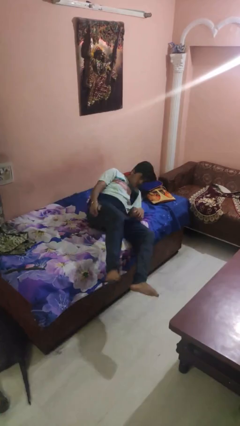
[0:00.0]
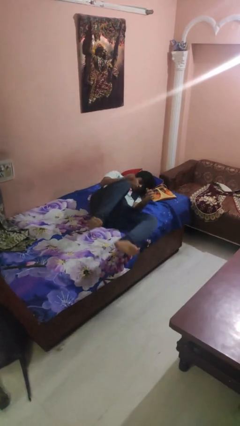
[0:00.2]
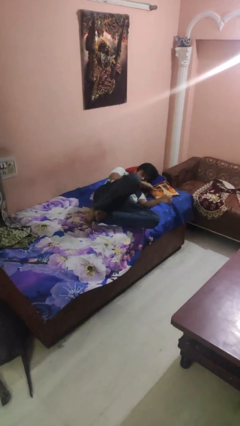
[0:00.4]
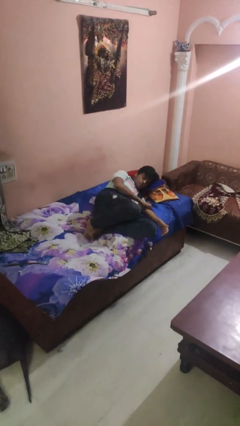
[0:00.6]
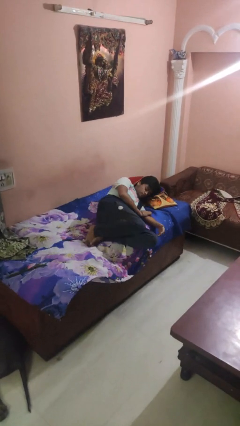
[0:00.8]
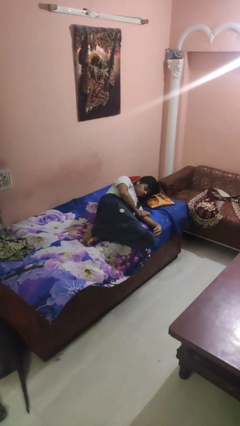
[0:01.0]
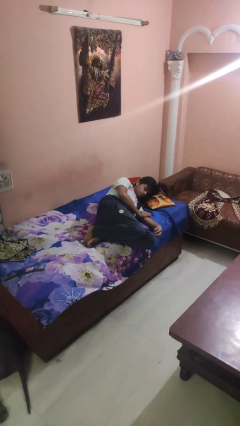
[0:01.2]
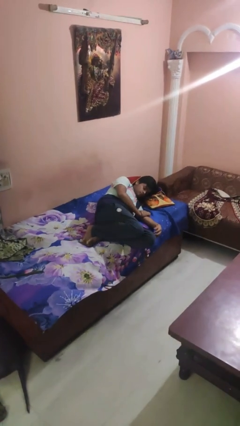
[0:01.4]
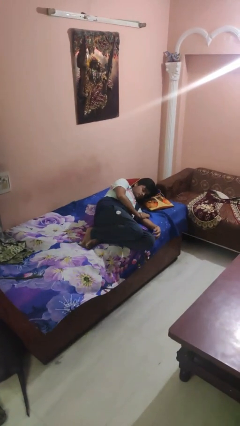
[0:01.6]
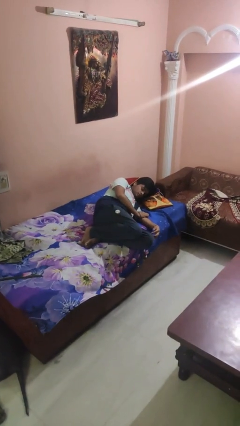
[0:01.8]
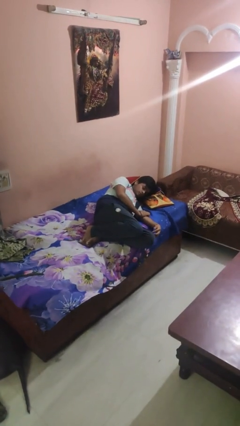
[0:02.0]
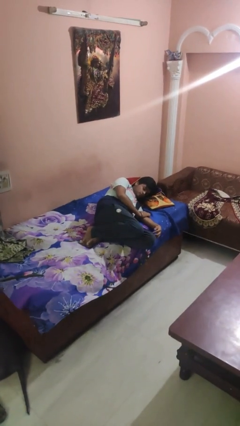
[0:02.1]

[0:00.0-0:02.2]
person lies down on bed

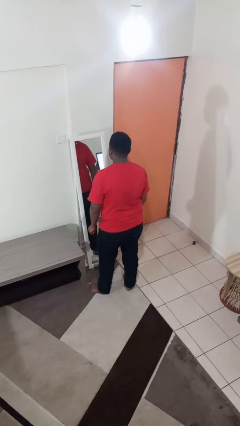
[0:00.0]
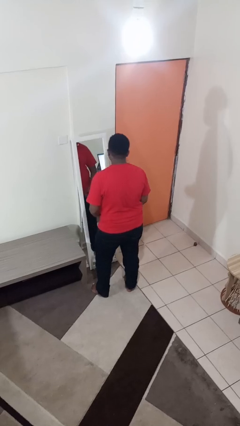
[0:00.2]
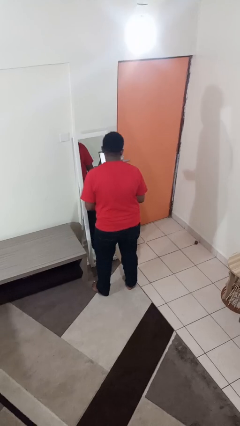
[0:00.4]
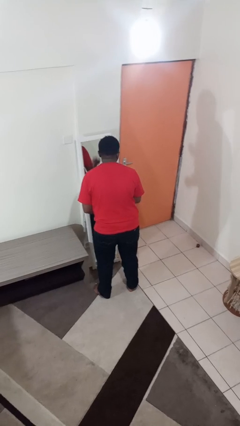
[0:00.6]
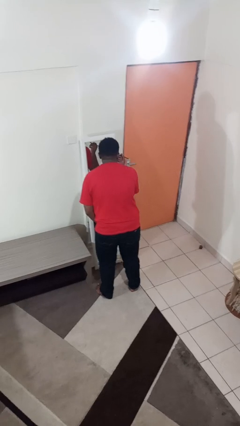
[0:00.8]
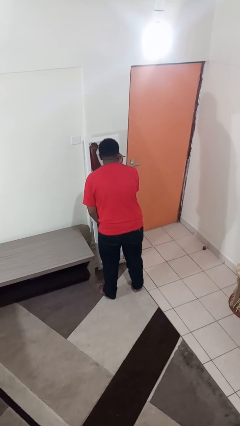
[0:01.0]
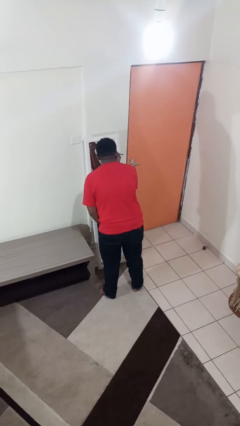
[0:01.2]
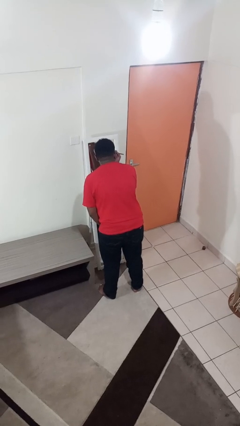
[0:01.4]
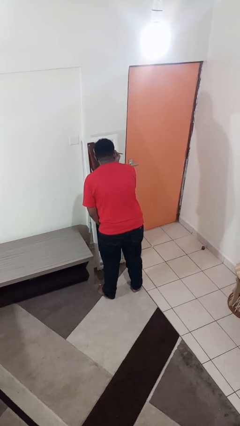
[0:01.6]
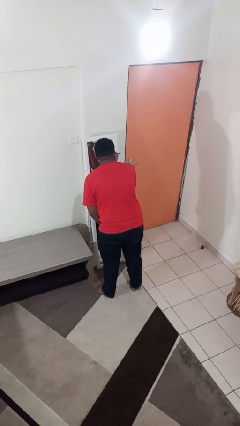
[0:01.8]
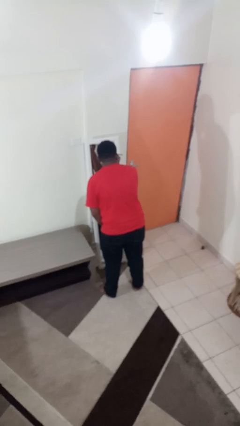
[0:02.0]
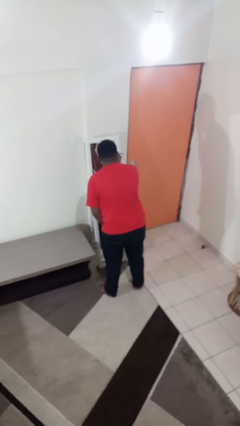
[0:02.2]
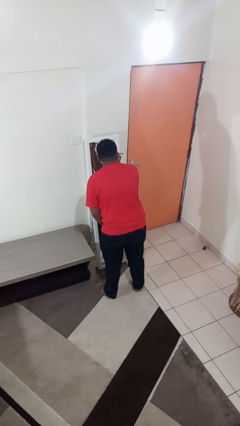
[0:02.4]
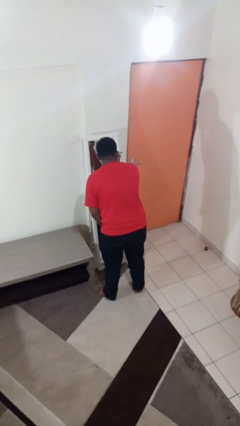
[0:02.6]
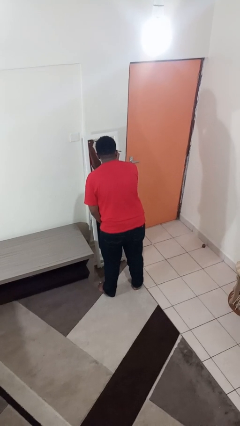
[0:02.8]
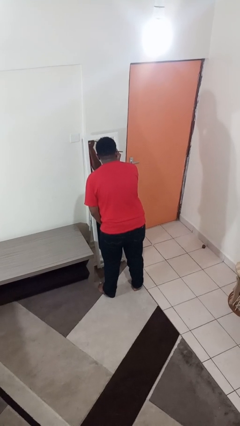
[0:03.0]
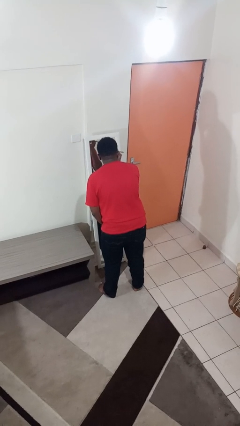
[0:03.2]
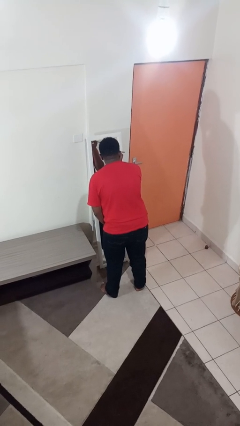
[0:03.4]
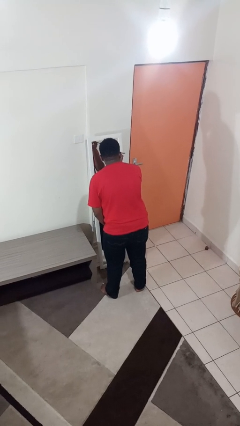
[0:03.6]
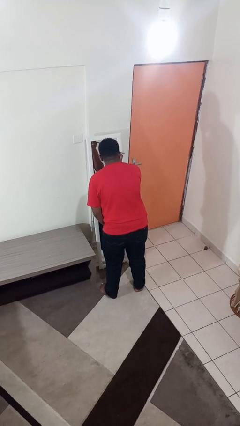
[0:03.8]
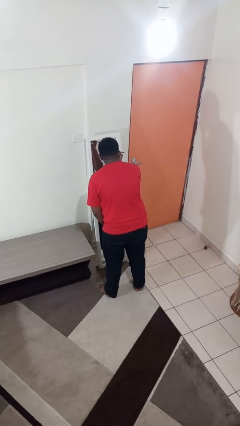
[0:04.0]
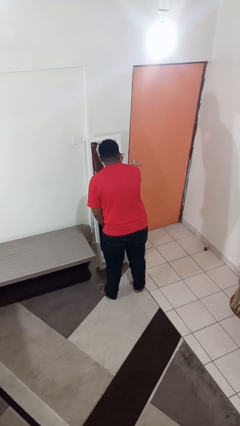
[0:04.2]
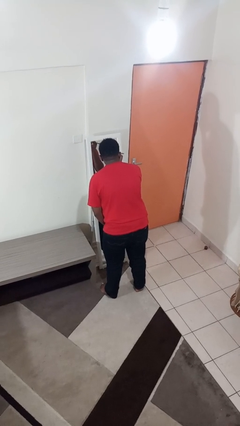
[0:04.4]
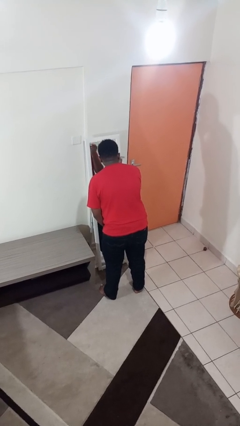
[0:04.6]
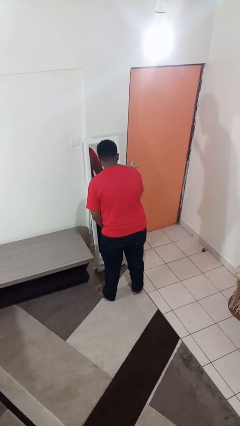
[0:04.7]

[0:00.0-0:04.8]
person applies eye makeup

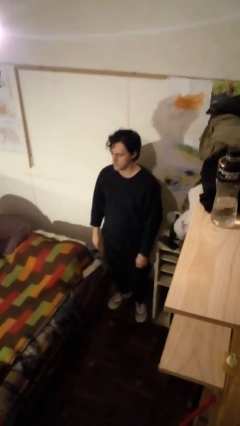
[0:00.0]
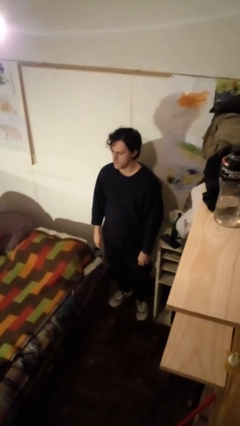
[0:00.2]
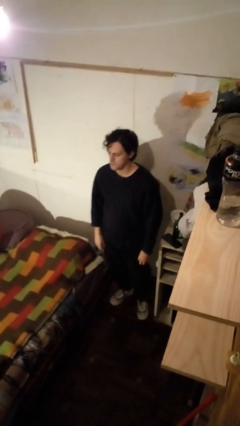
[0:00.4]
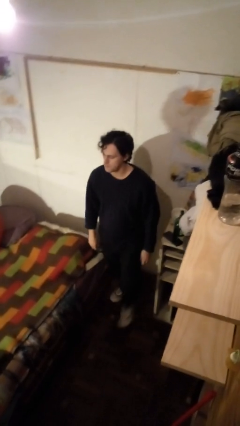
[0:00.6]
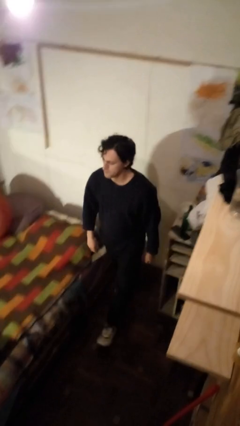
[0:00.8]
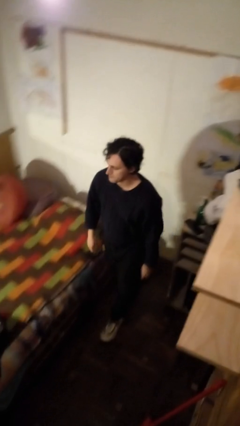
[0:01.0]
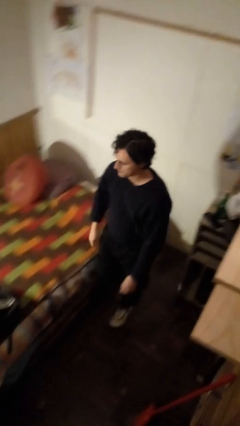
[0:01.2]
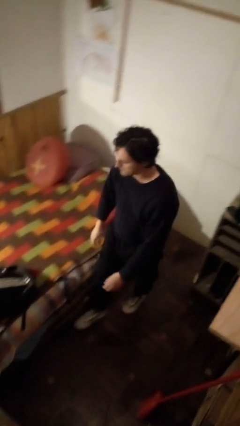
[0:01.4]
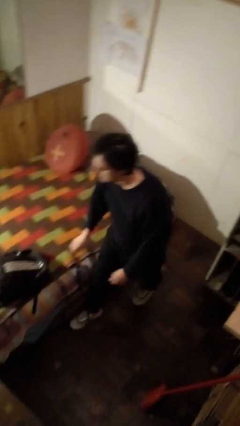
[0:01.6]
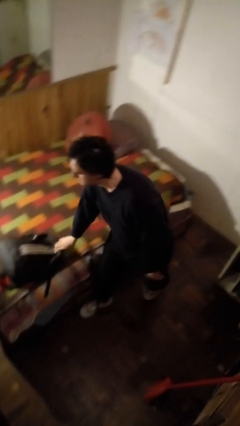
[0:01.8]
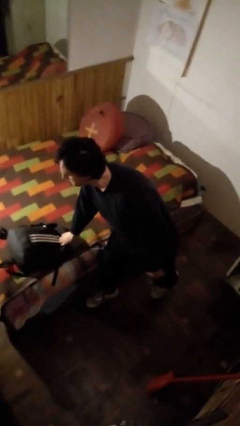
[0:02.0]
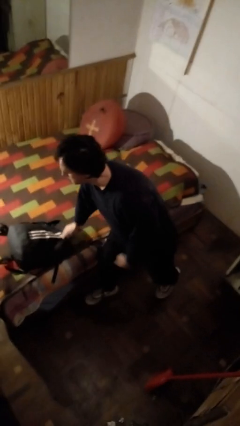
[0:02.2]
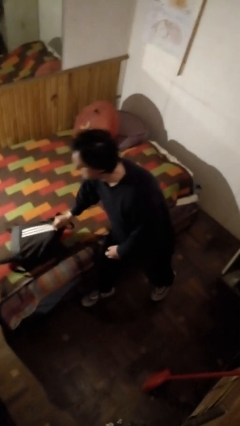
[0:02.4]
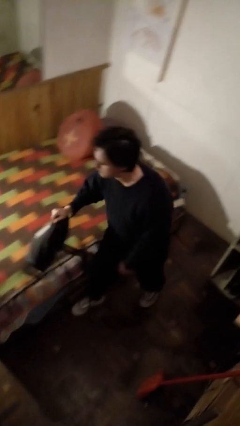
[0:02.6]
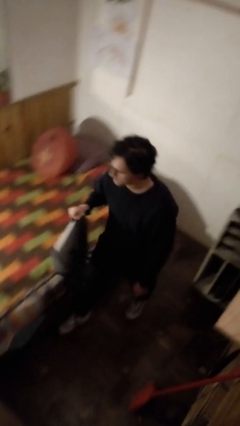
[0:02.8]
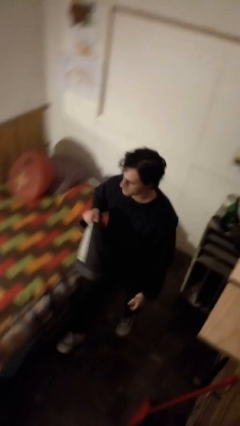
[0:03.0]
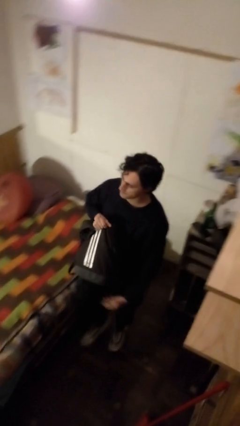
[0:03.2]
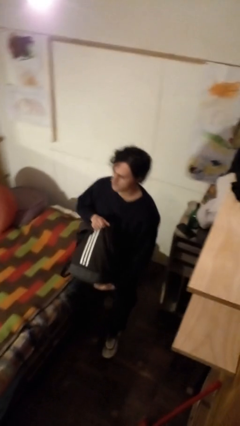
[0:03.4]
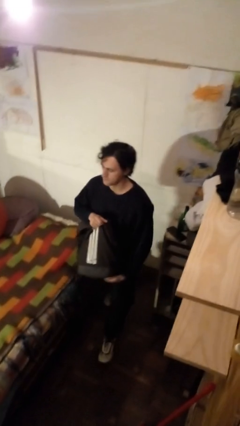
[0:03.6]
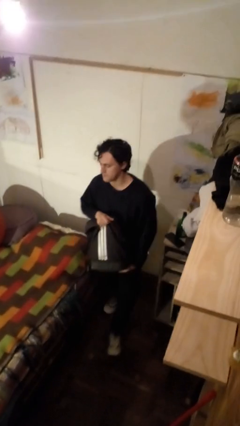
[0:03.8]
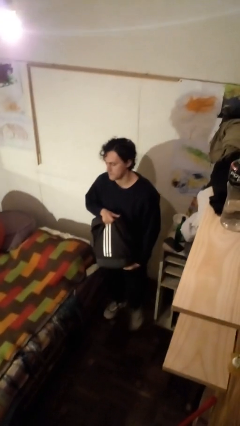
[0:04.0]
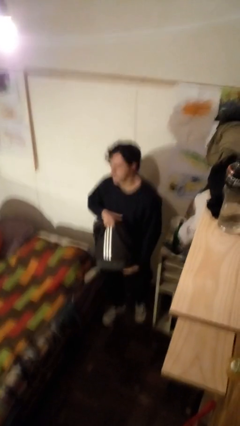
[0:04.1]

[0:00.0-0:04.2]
person picks up object from bed

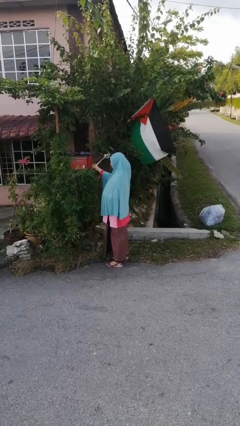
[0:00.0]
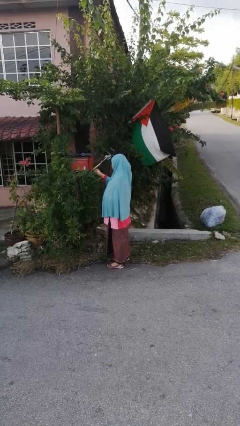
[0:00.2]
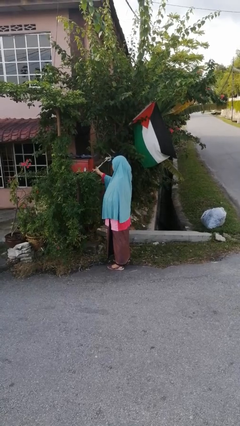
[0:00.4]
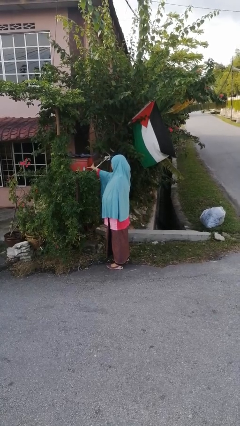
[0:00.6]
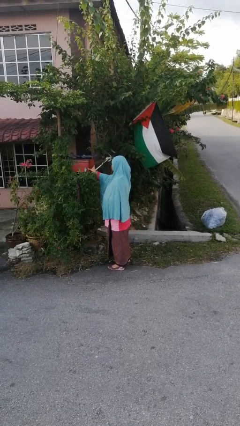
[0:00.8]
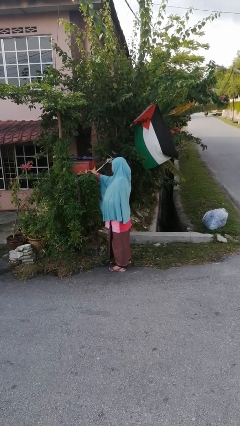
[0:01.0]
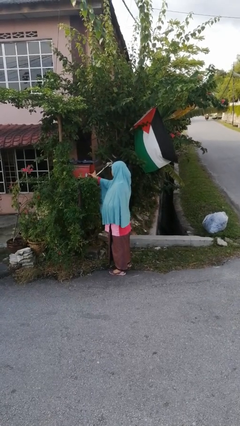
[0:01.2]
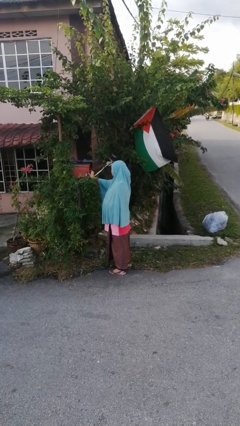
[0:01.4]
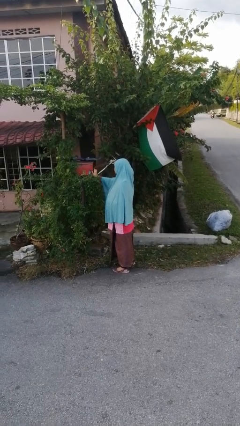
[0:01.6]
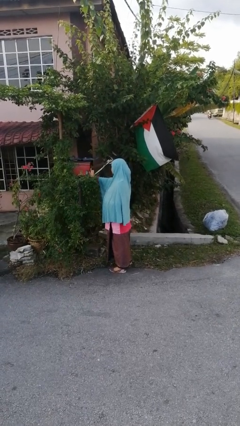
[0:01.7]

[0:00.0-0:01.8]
person closes mailbox

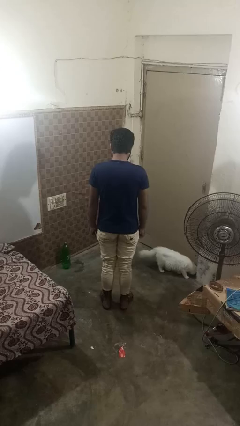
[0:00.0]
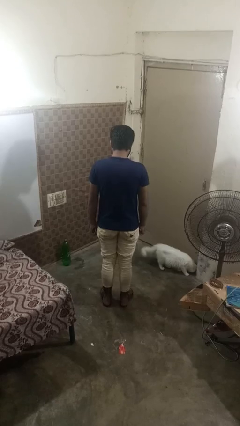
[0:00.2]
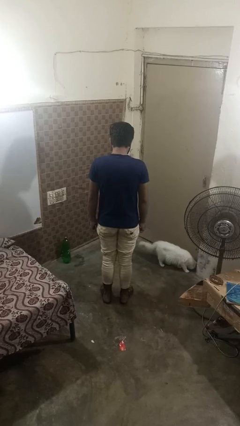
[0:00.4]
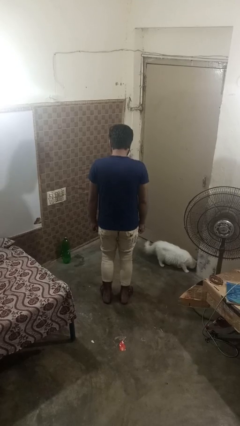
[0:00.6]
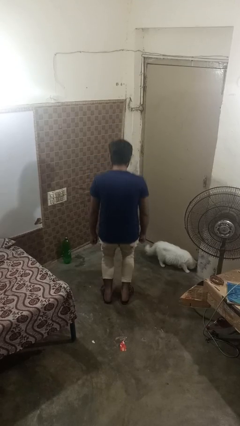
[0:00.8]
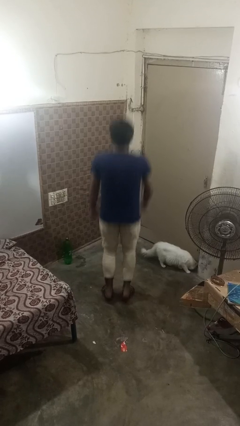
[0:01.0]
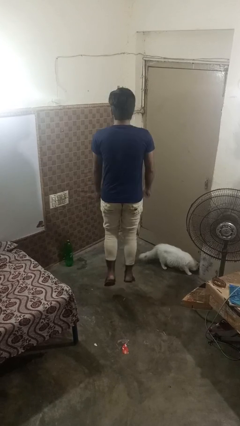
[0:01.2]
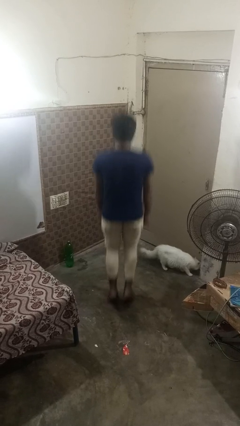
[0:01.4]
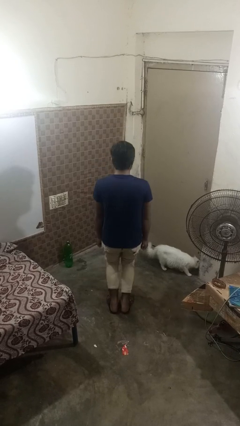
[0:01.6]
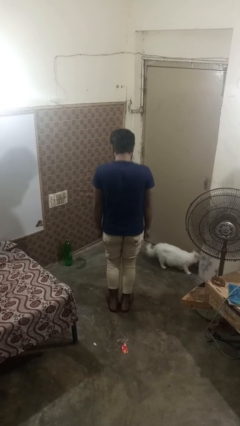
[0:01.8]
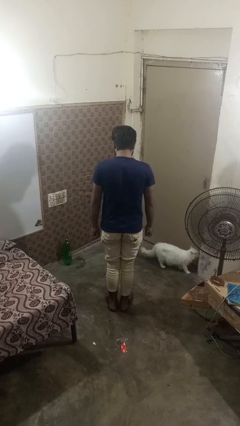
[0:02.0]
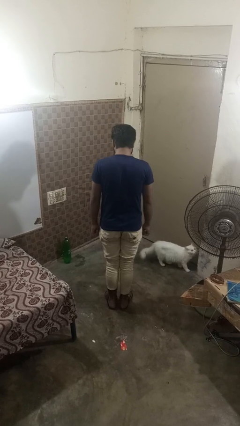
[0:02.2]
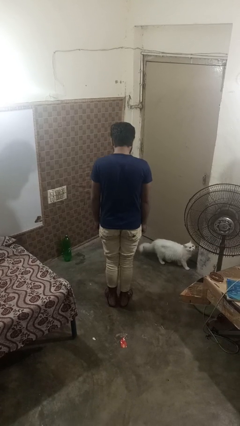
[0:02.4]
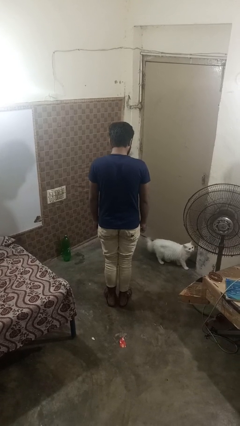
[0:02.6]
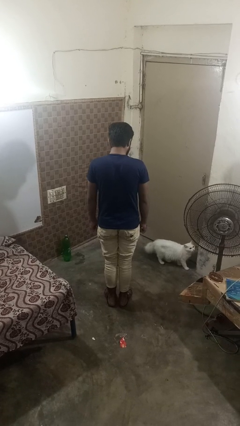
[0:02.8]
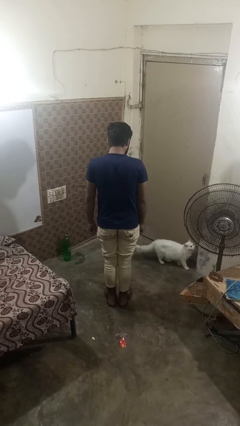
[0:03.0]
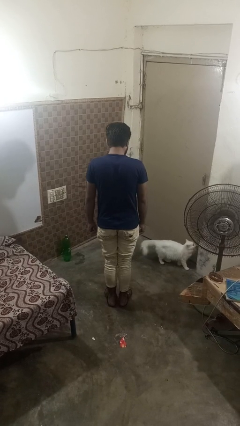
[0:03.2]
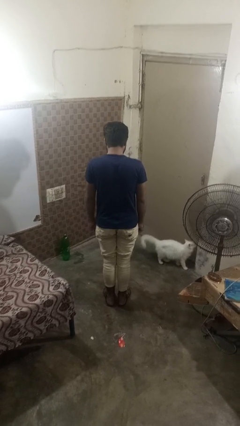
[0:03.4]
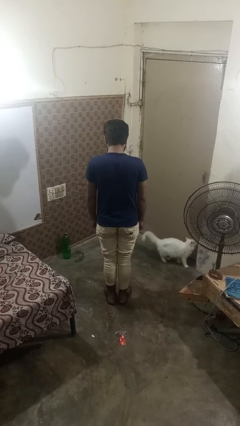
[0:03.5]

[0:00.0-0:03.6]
person jumps

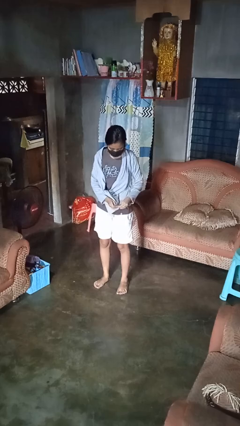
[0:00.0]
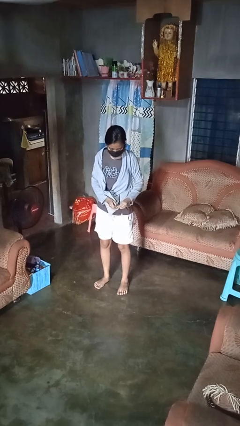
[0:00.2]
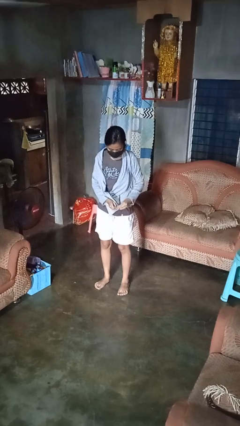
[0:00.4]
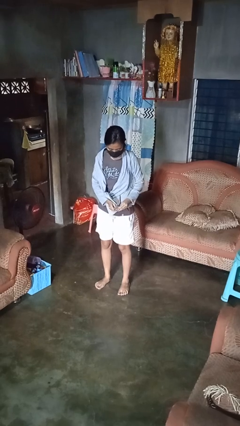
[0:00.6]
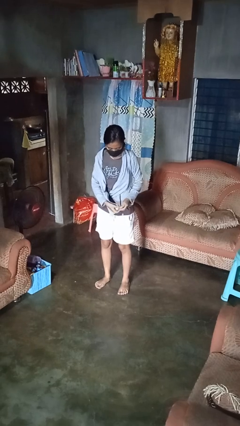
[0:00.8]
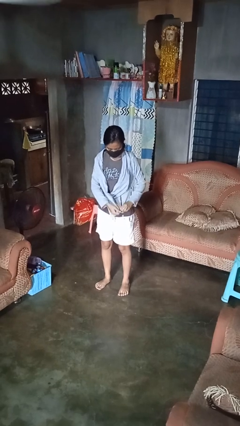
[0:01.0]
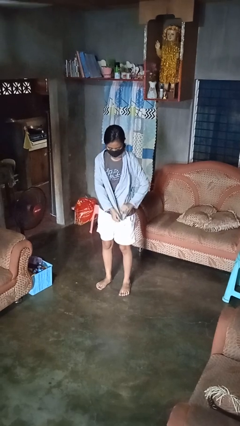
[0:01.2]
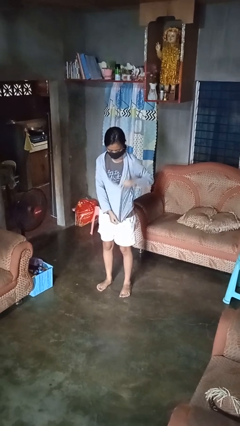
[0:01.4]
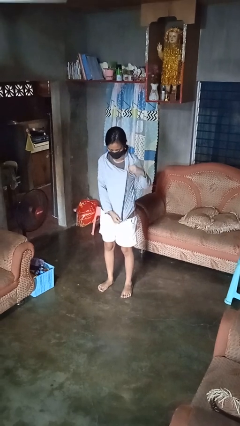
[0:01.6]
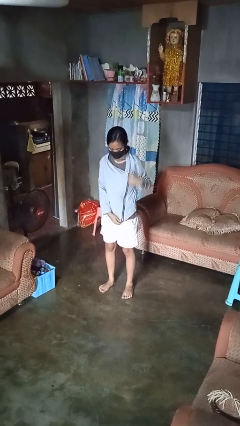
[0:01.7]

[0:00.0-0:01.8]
person zips up jacket
